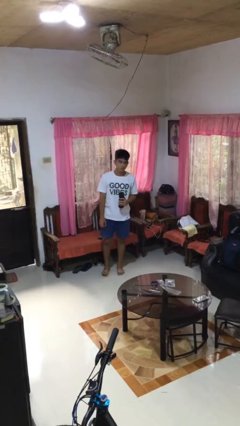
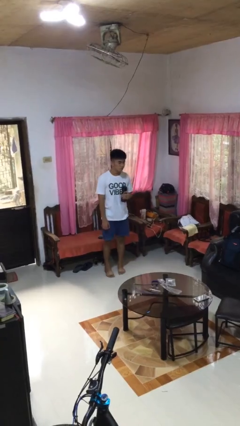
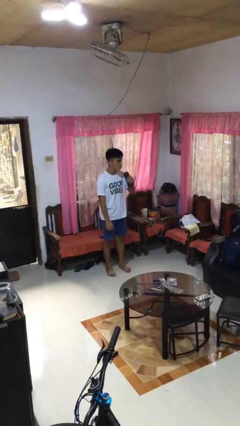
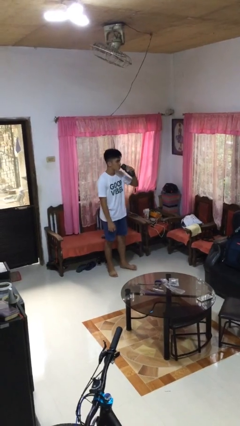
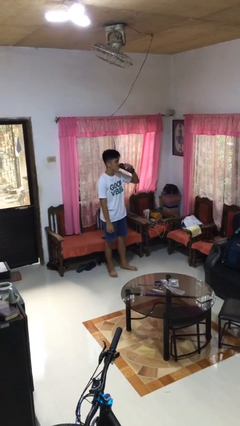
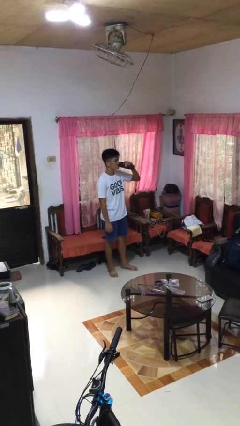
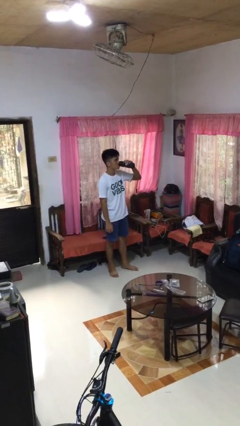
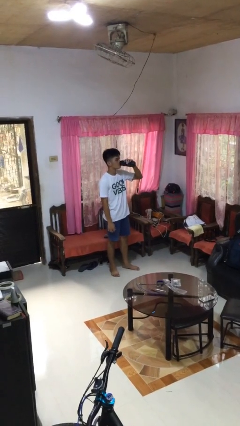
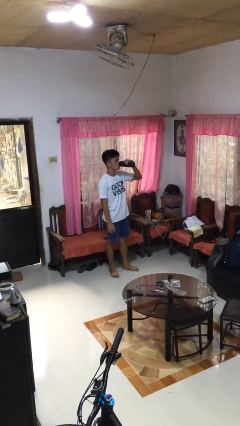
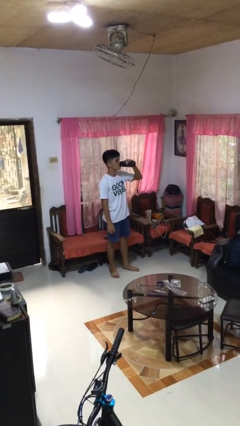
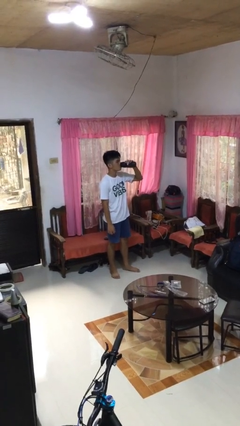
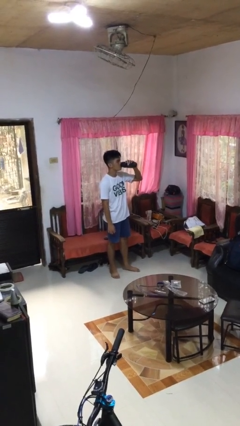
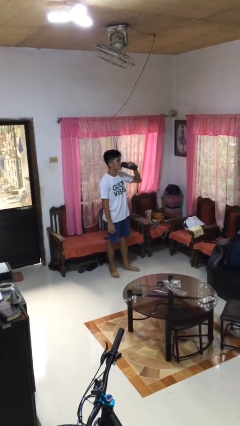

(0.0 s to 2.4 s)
person drinks from bottle

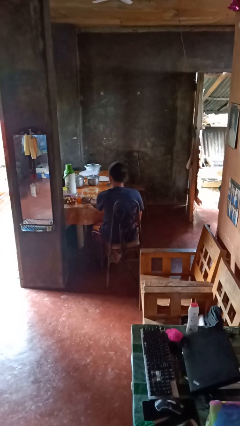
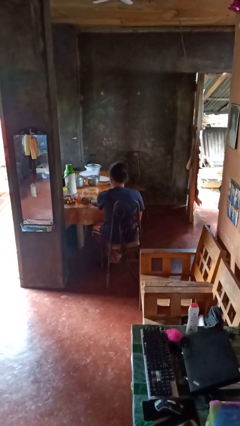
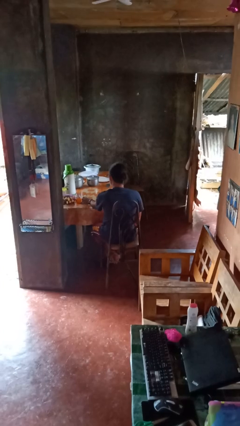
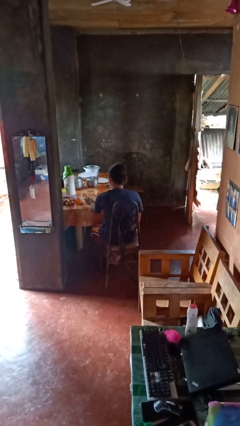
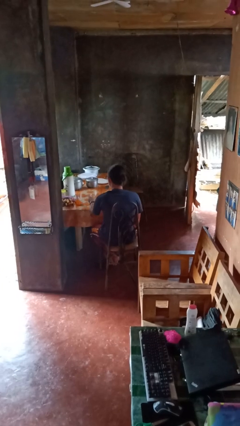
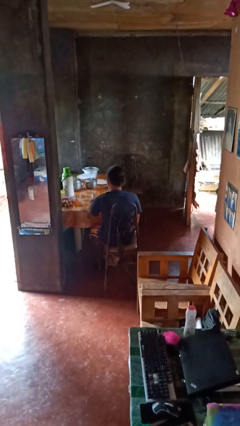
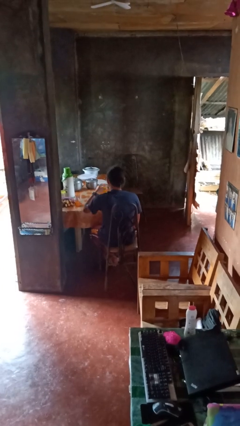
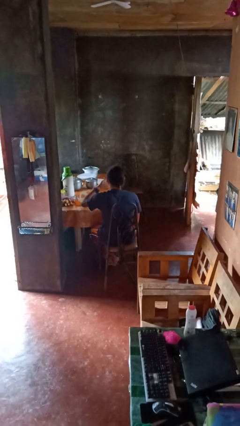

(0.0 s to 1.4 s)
person picks up object from table

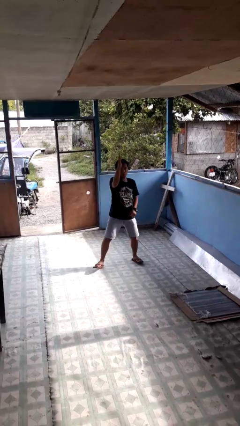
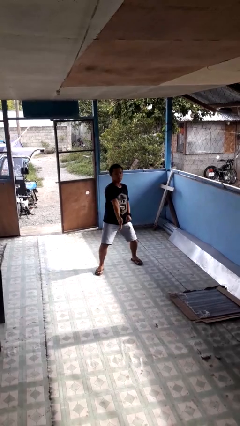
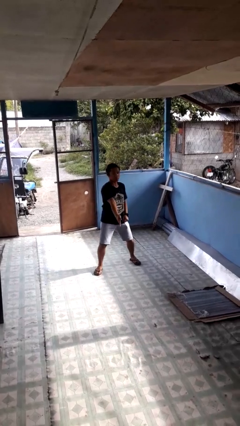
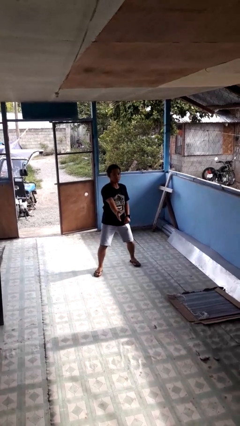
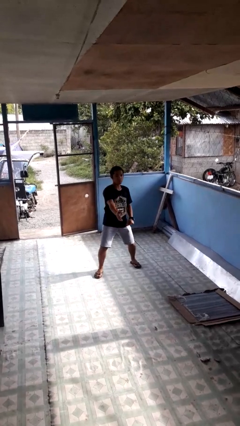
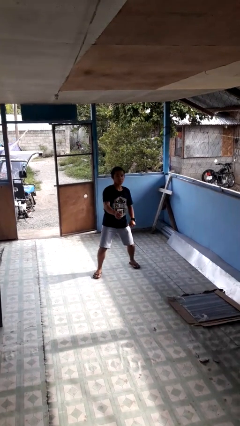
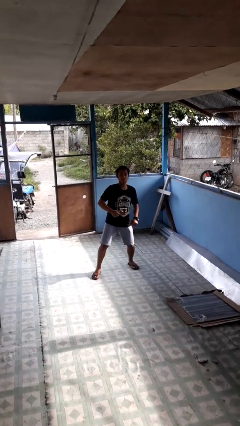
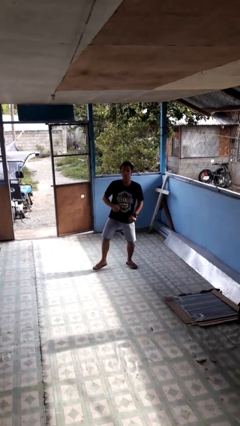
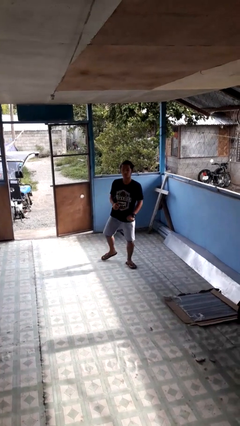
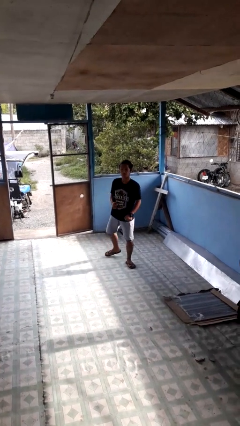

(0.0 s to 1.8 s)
person karate chop

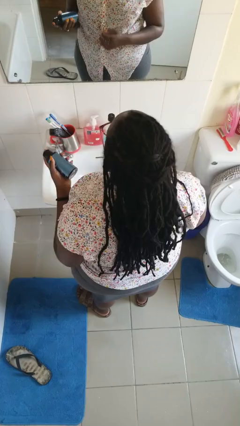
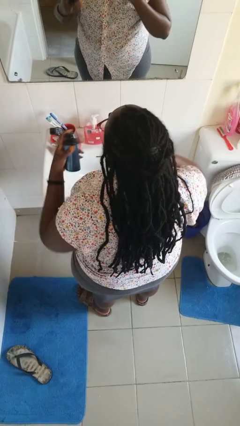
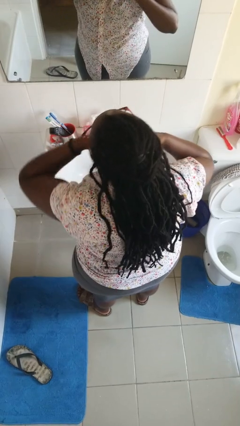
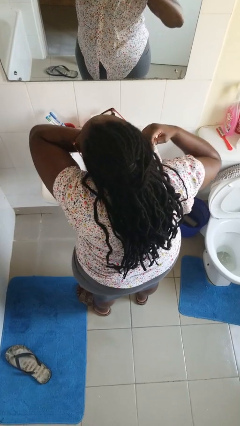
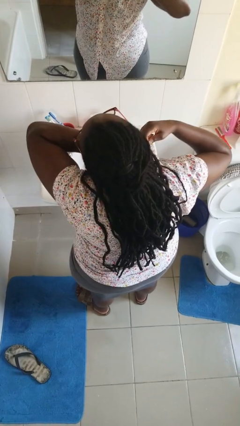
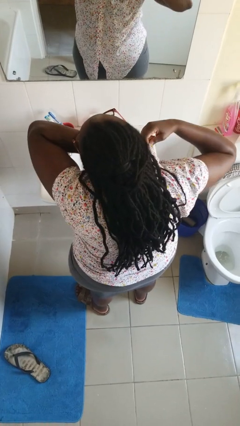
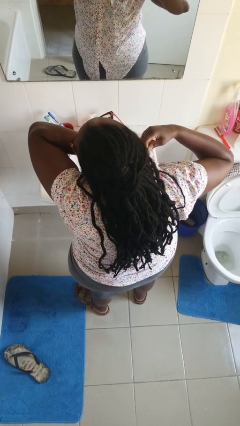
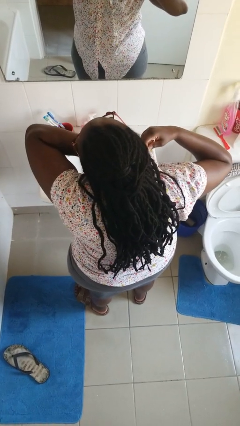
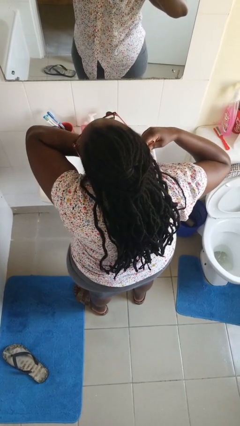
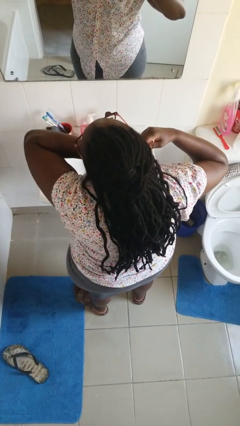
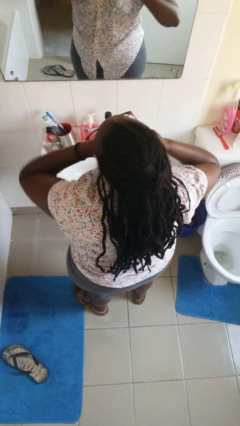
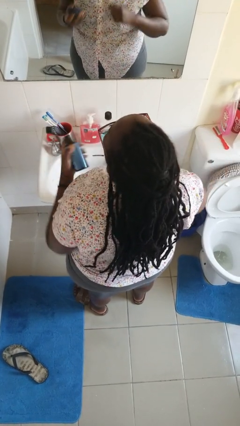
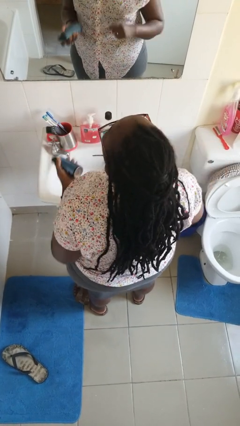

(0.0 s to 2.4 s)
person applies deodorant

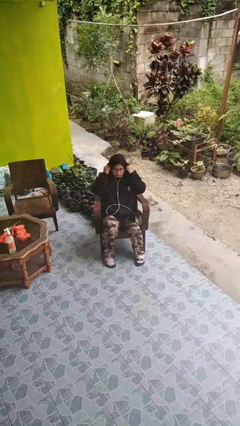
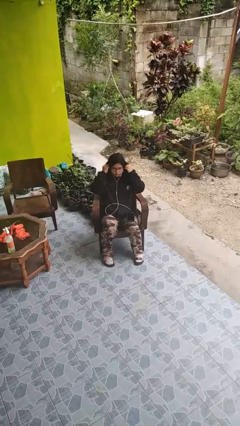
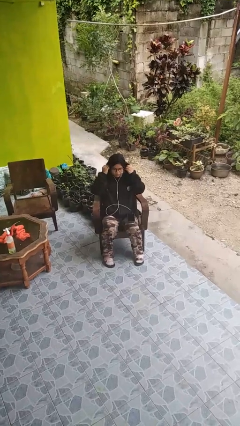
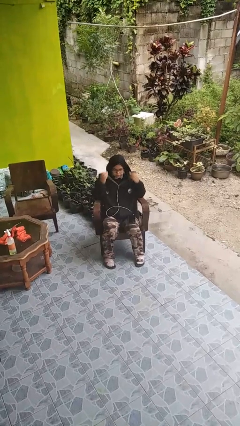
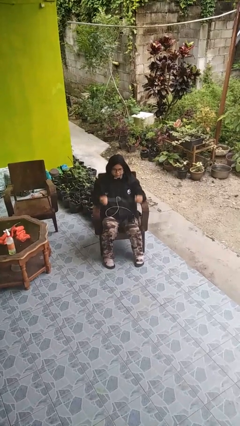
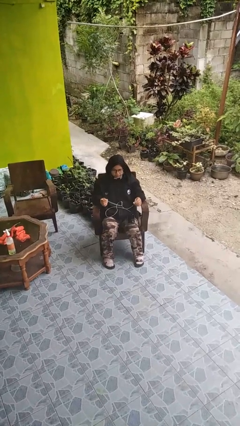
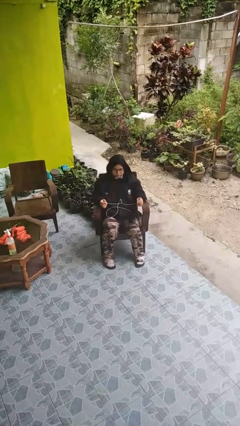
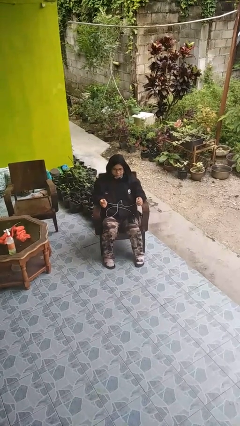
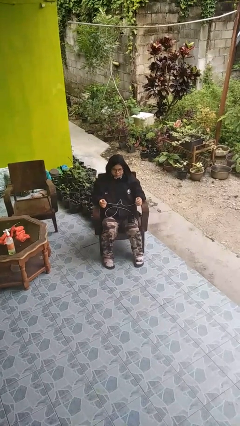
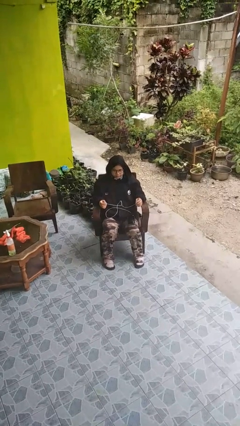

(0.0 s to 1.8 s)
person takes off headphones

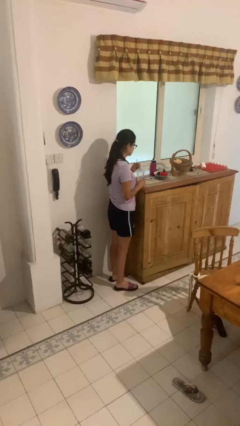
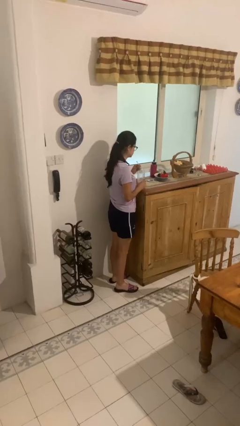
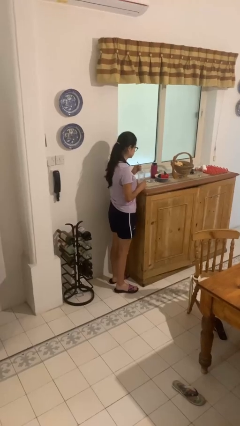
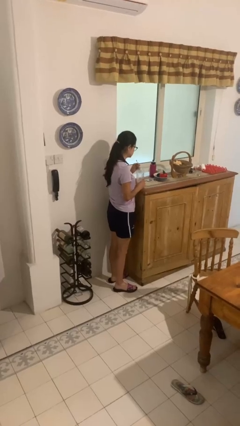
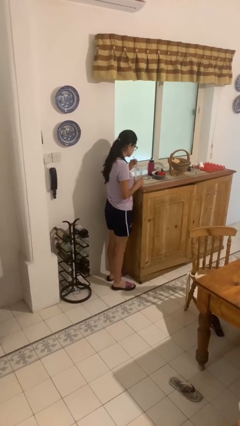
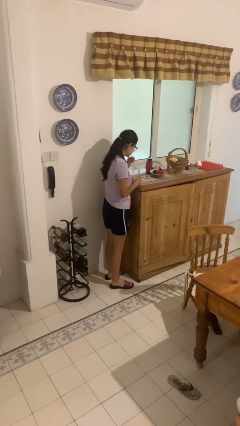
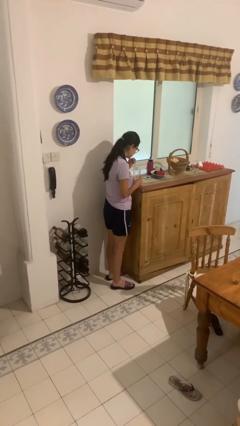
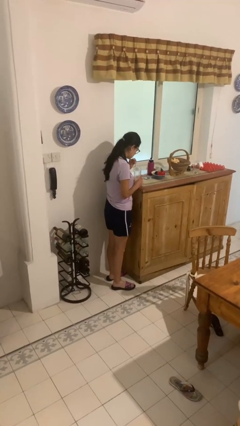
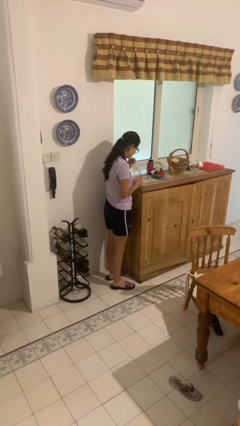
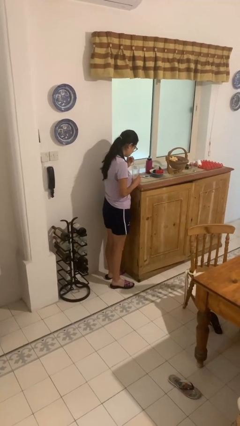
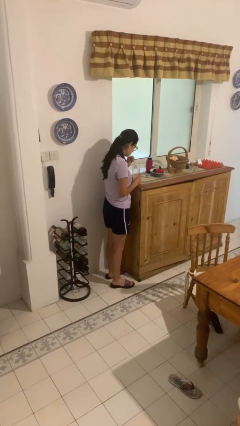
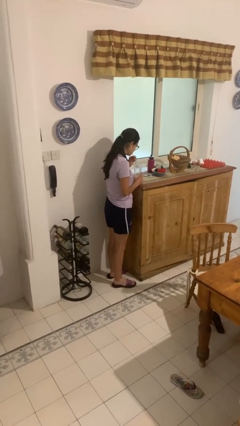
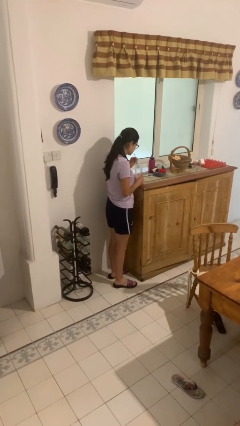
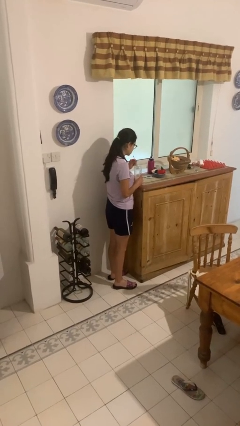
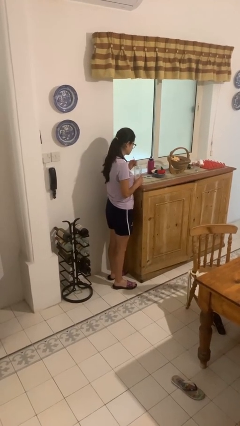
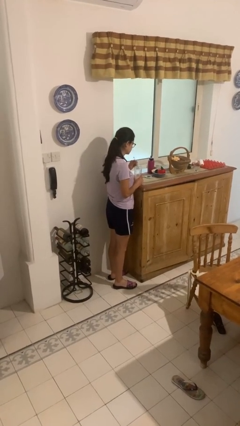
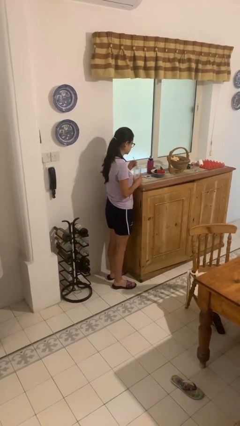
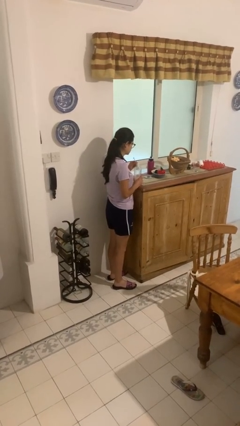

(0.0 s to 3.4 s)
person drinks from straw

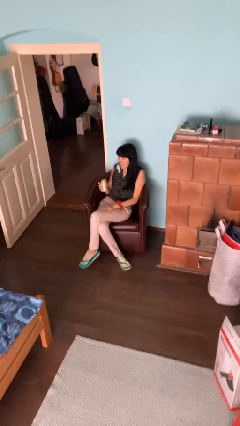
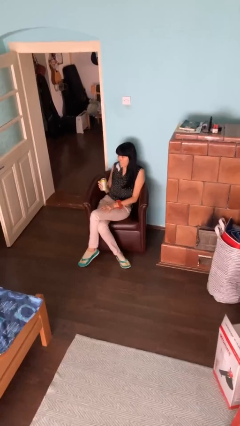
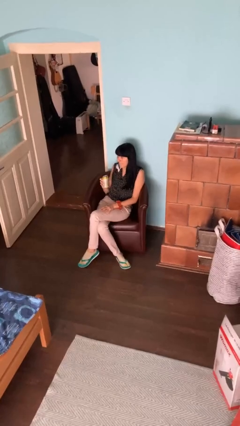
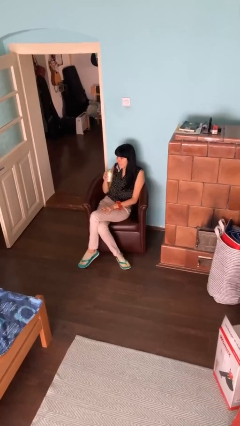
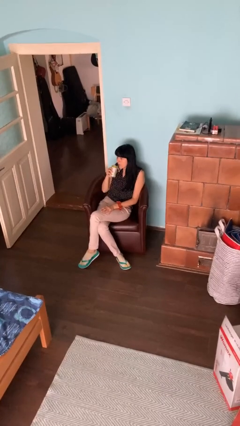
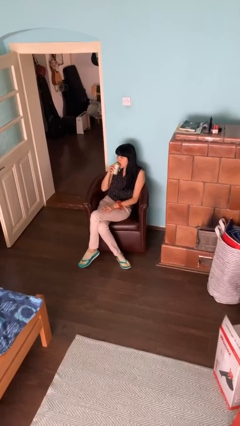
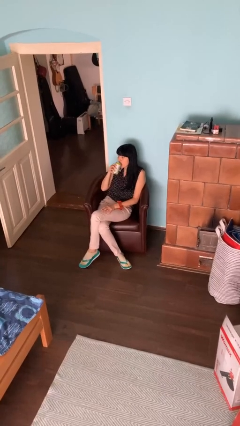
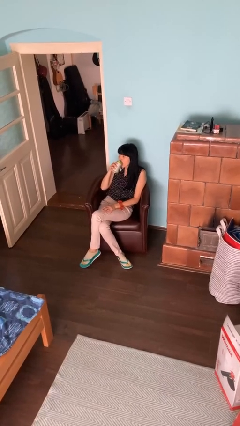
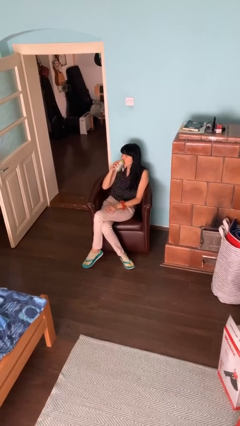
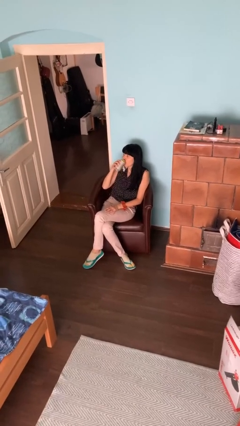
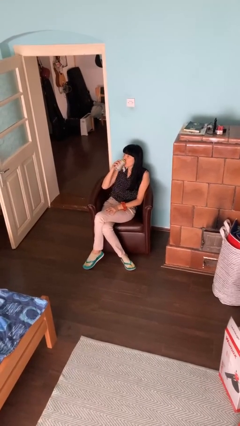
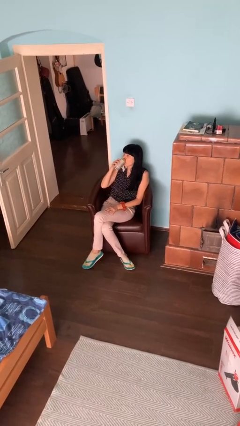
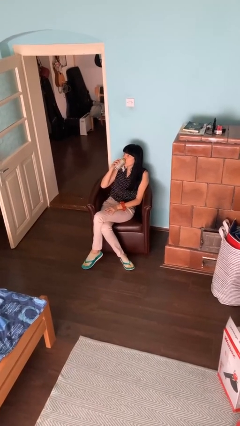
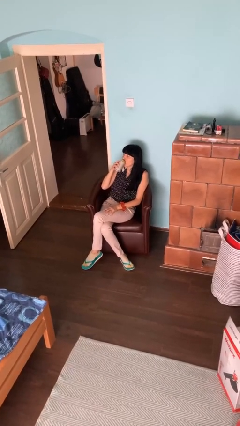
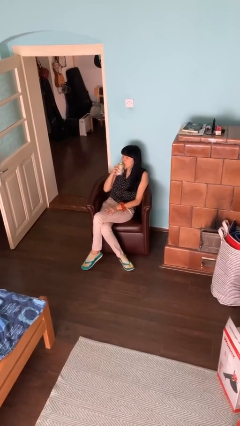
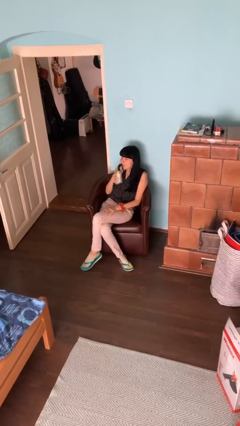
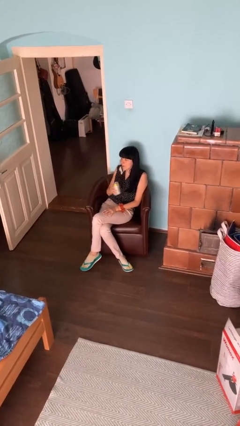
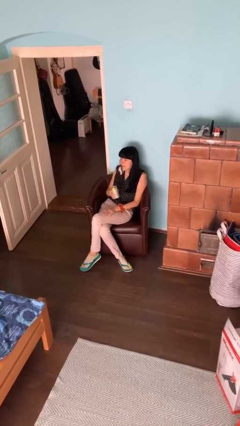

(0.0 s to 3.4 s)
person drinks from beverage can
